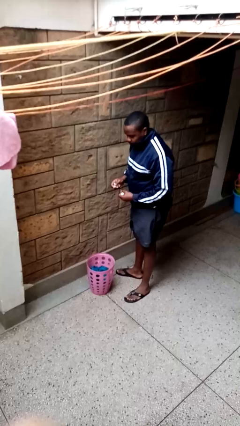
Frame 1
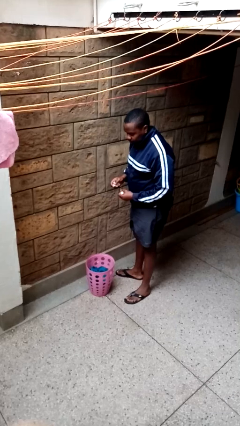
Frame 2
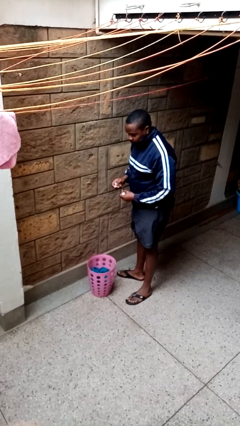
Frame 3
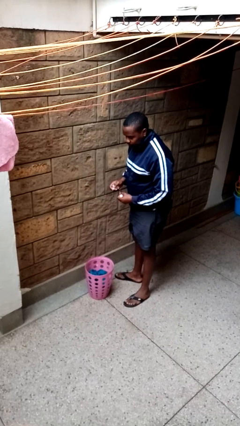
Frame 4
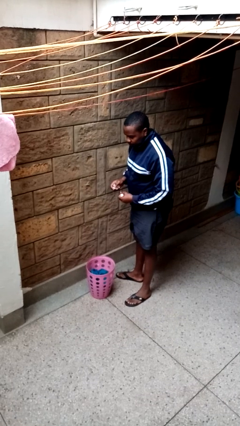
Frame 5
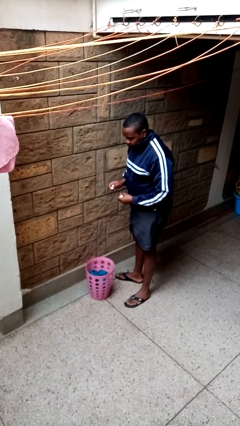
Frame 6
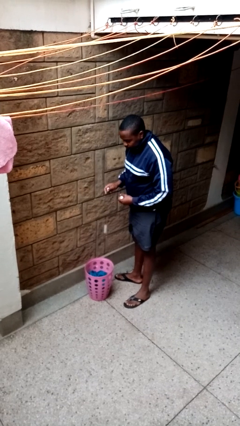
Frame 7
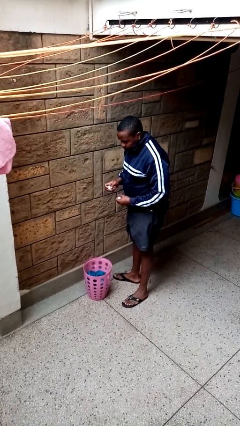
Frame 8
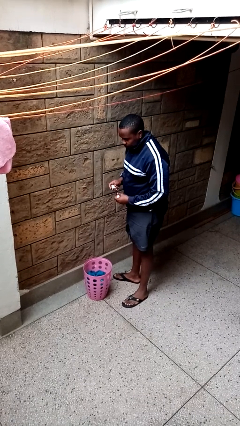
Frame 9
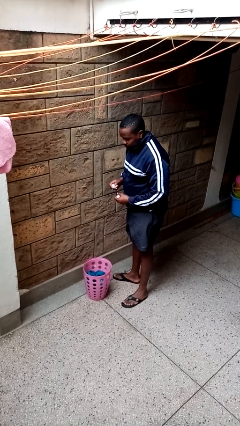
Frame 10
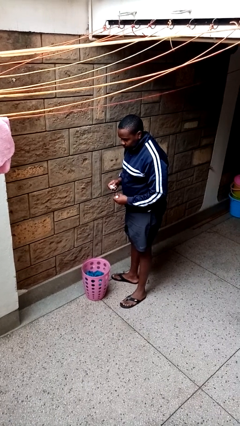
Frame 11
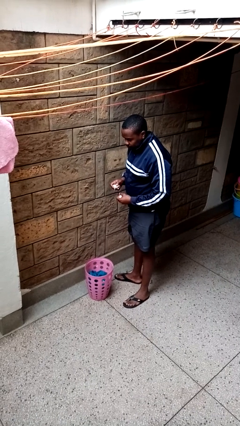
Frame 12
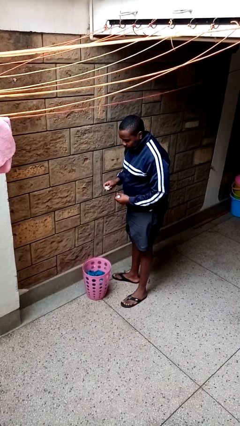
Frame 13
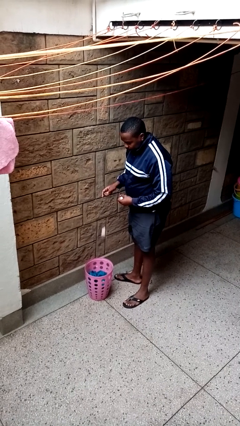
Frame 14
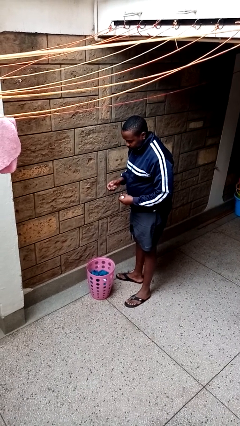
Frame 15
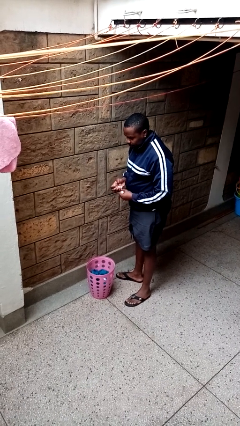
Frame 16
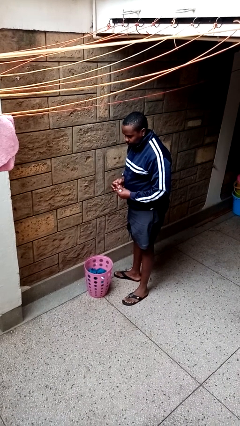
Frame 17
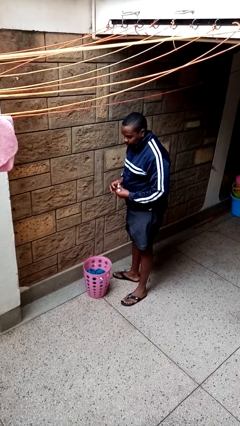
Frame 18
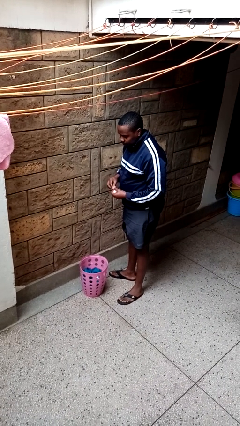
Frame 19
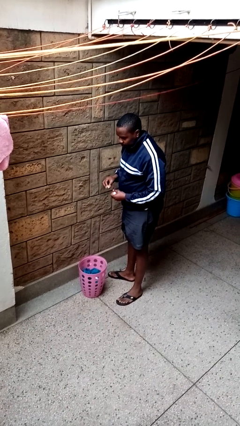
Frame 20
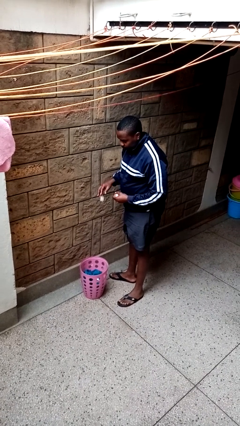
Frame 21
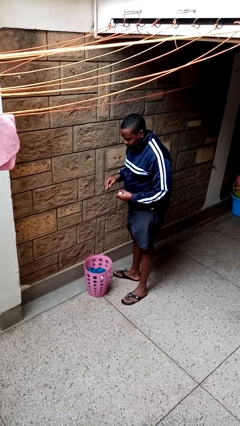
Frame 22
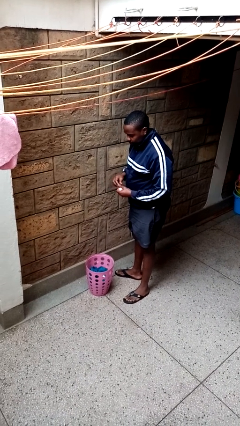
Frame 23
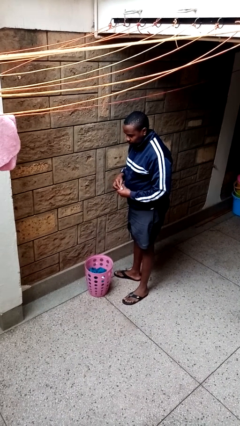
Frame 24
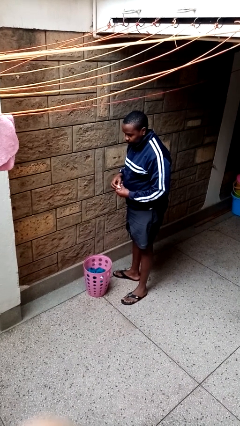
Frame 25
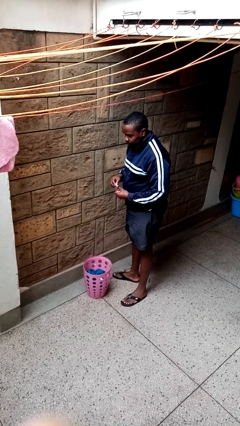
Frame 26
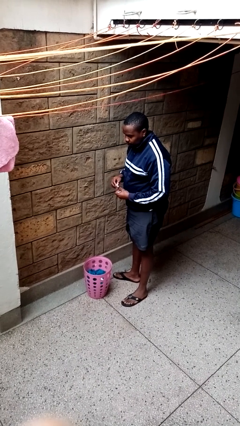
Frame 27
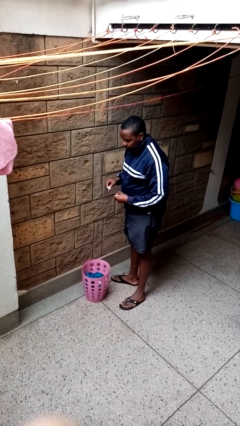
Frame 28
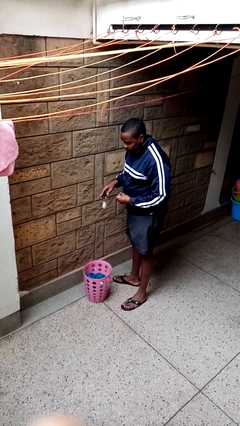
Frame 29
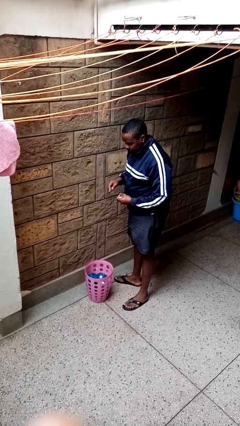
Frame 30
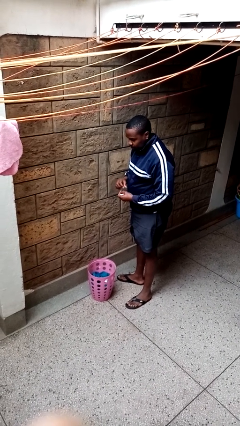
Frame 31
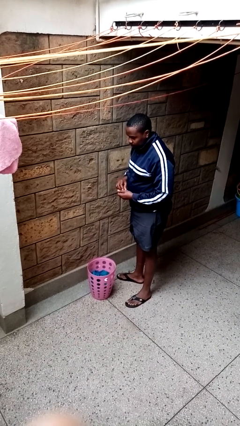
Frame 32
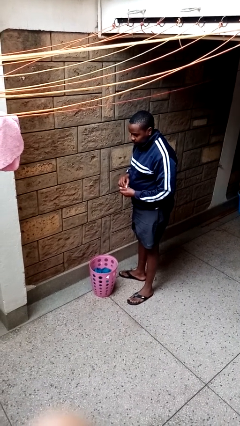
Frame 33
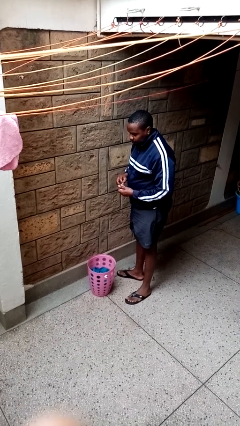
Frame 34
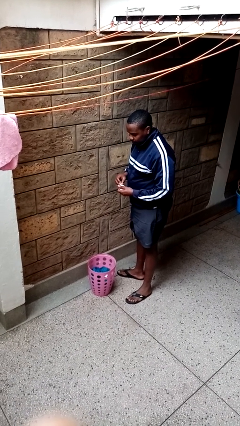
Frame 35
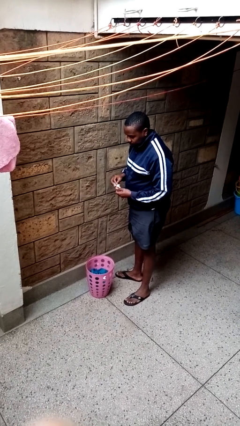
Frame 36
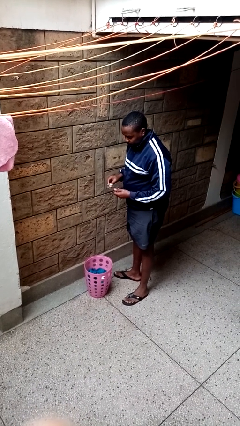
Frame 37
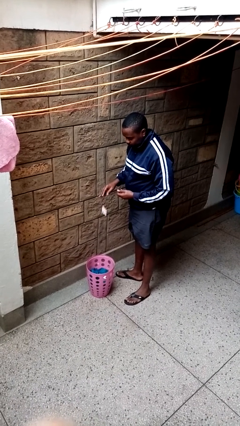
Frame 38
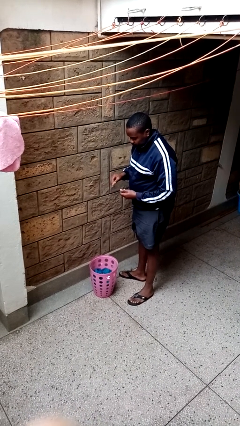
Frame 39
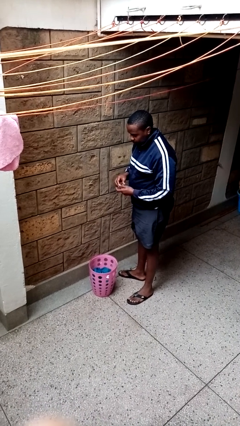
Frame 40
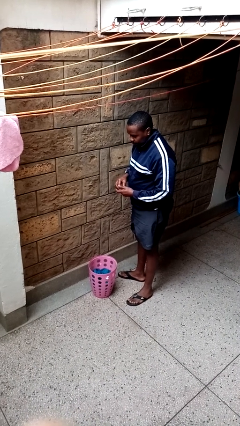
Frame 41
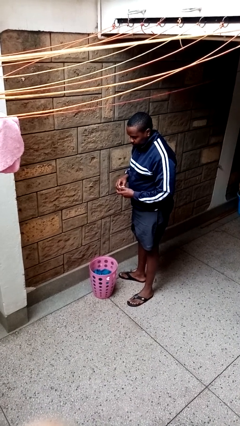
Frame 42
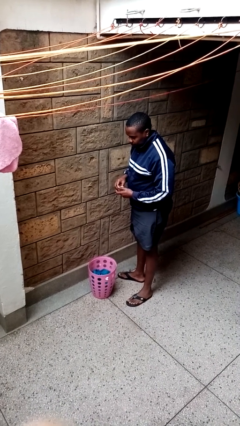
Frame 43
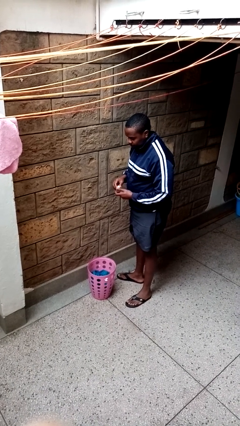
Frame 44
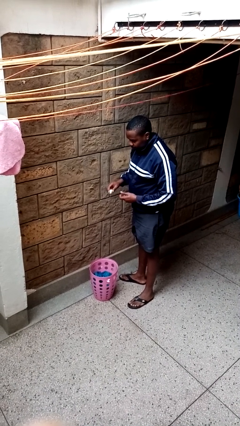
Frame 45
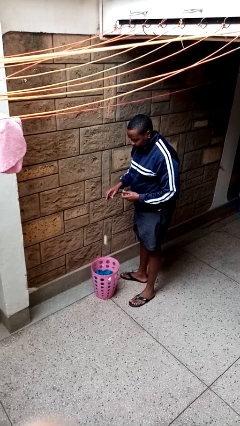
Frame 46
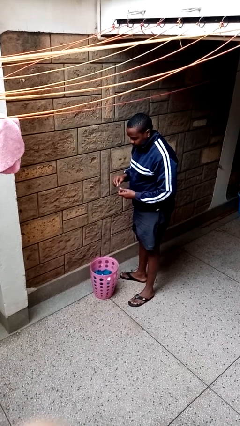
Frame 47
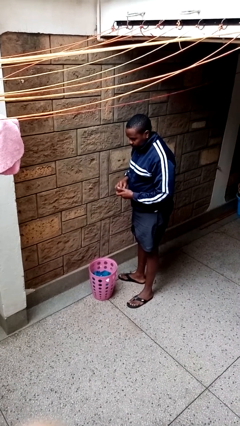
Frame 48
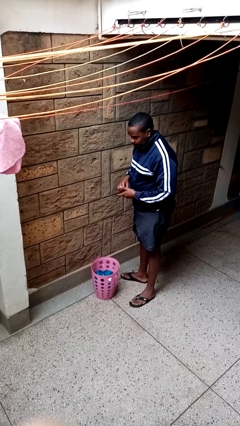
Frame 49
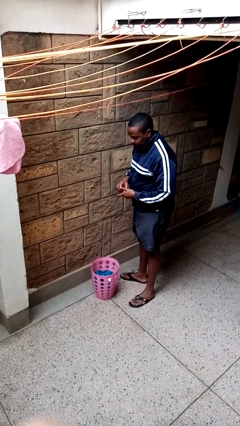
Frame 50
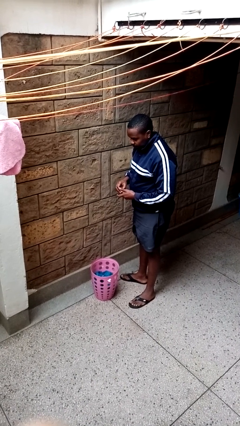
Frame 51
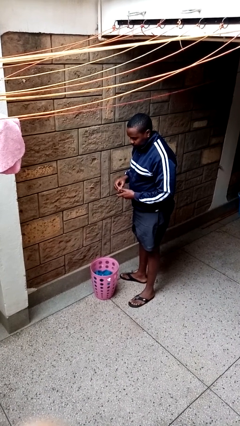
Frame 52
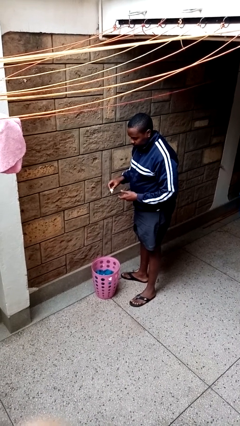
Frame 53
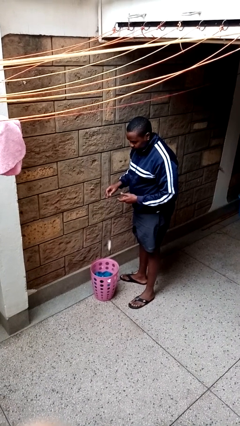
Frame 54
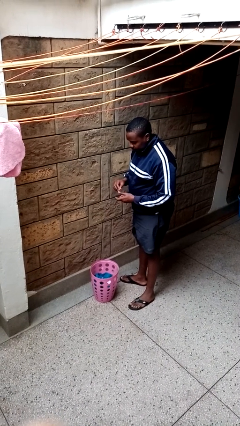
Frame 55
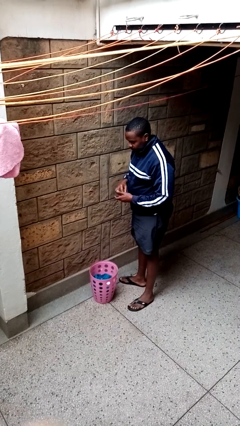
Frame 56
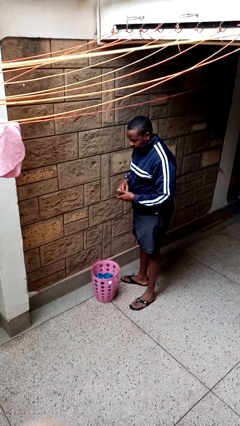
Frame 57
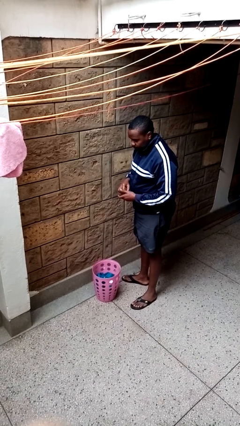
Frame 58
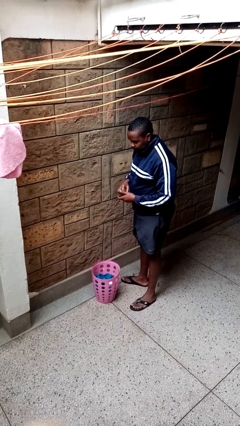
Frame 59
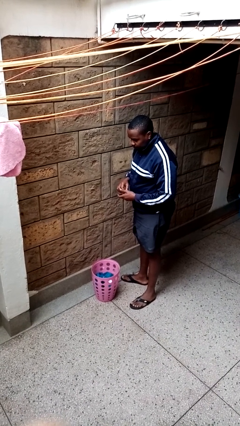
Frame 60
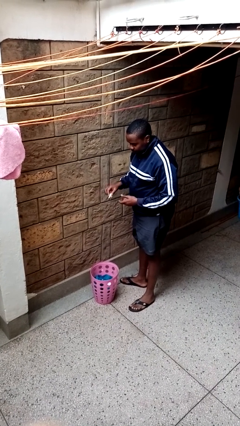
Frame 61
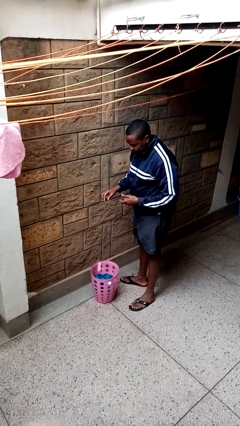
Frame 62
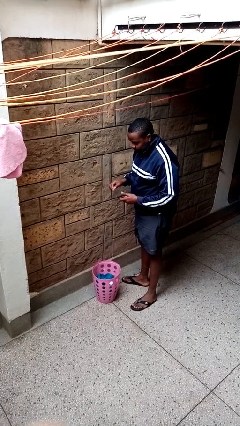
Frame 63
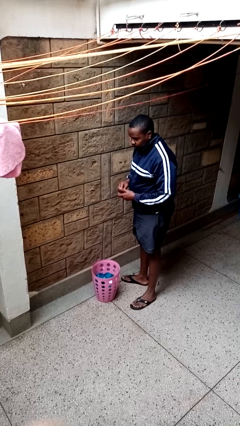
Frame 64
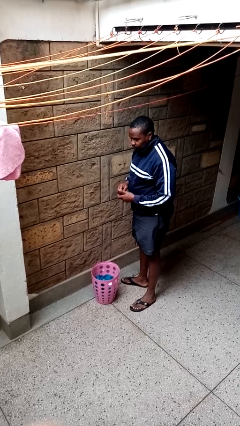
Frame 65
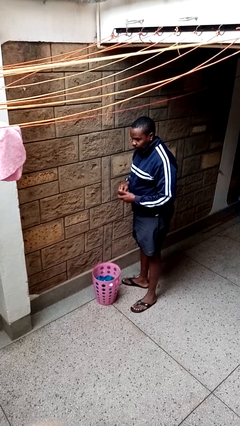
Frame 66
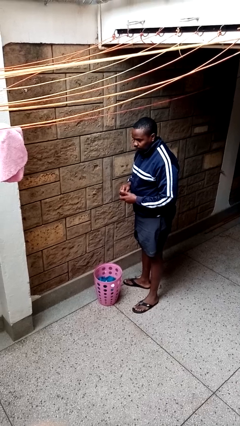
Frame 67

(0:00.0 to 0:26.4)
person discards trash

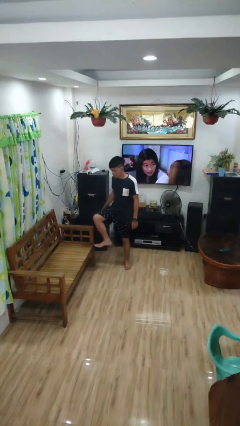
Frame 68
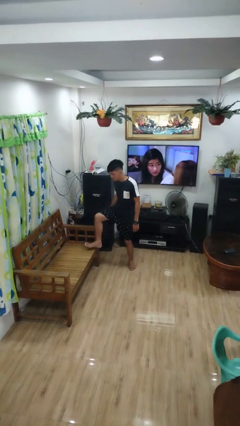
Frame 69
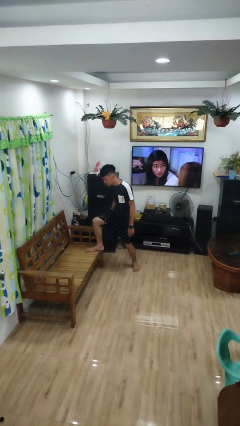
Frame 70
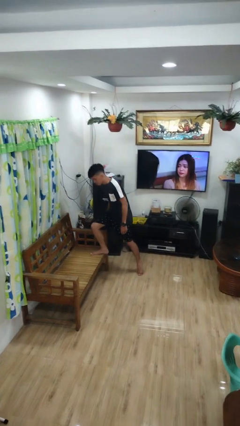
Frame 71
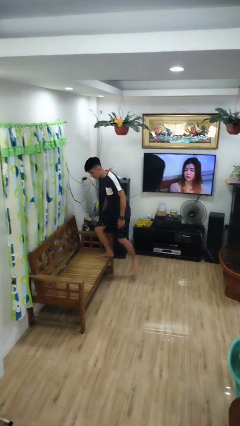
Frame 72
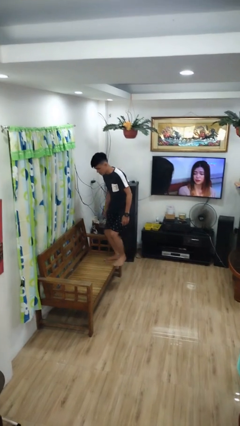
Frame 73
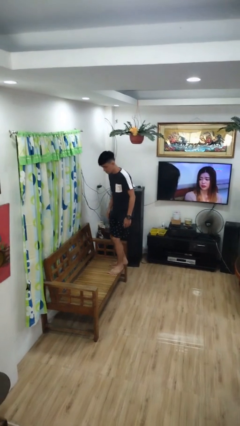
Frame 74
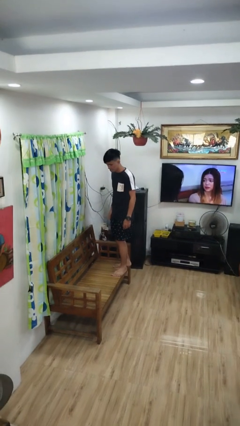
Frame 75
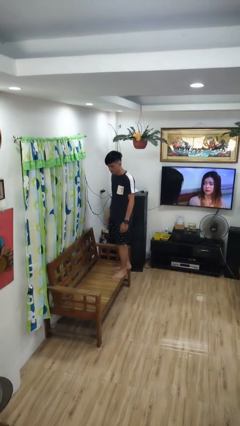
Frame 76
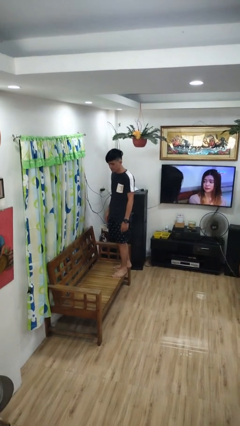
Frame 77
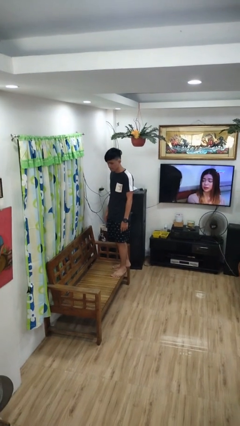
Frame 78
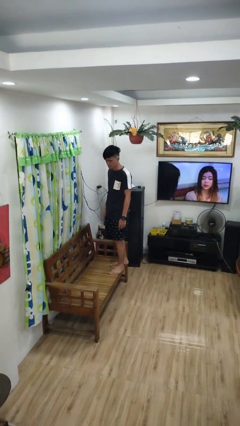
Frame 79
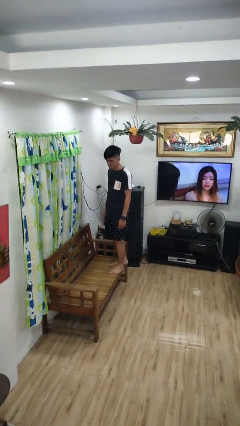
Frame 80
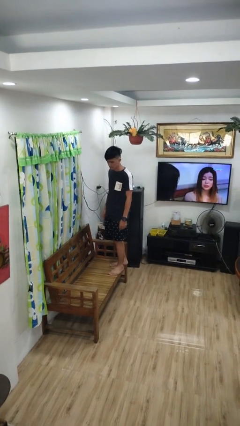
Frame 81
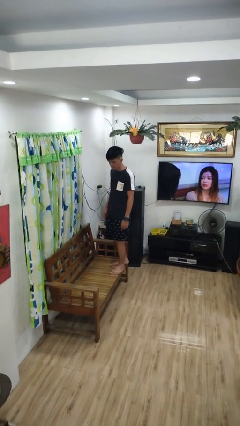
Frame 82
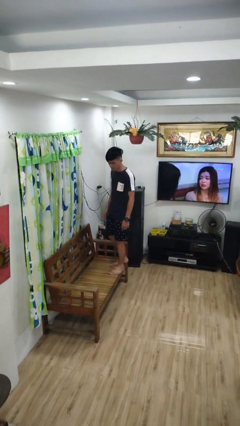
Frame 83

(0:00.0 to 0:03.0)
person climbs on couch

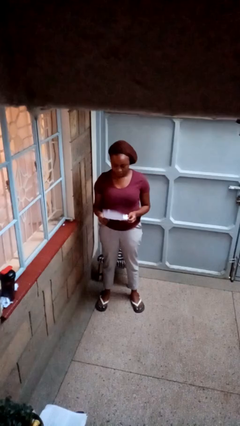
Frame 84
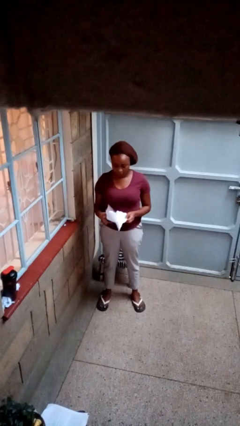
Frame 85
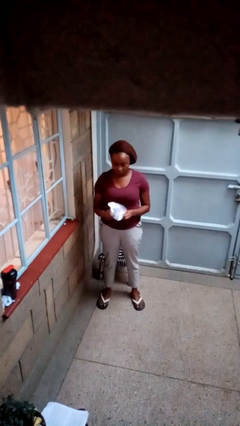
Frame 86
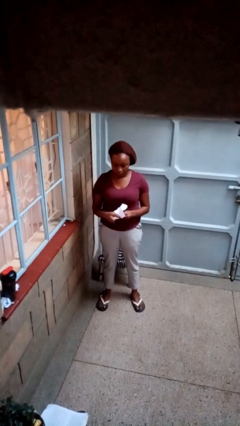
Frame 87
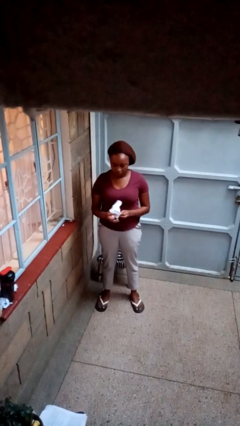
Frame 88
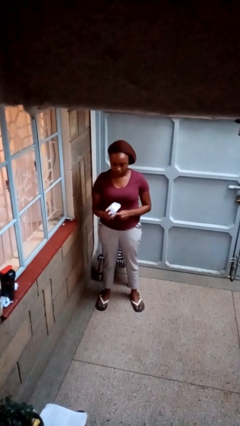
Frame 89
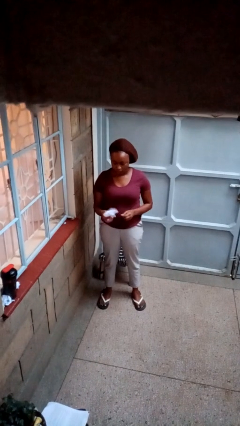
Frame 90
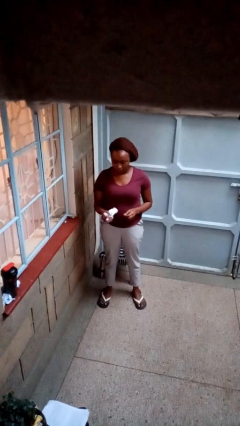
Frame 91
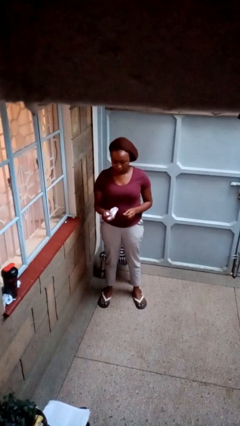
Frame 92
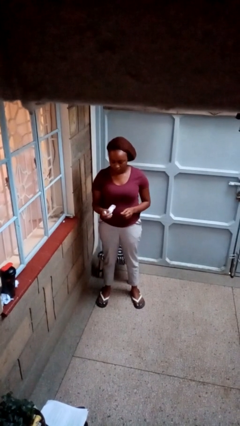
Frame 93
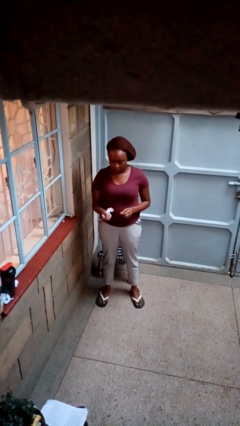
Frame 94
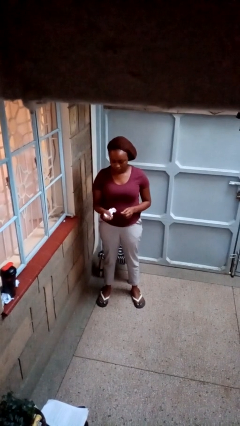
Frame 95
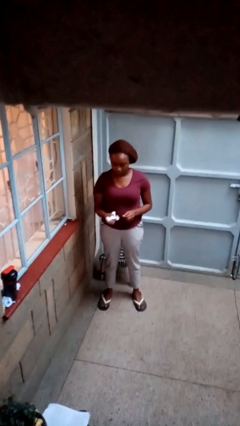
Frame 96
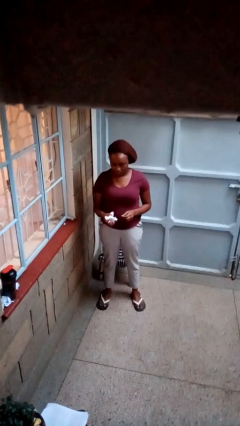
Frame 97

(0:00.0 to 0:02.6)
person crumples paper
